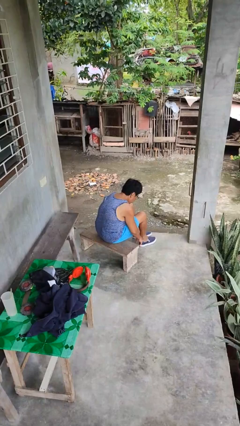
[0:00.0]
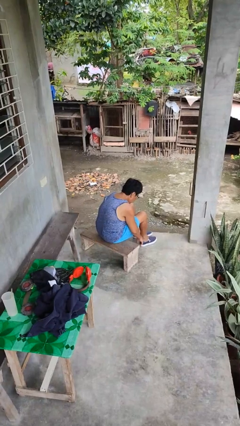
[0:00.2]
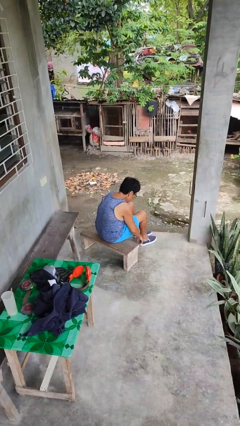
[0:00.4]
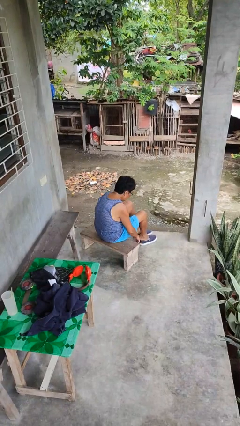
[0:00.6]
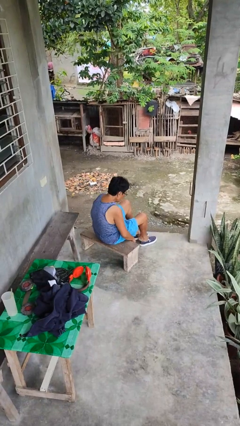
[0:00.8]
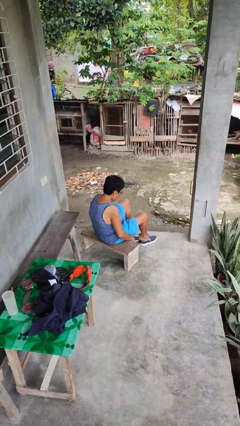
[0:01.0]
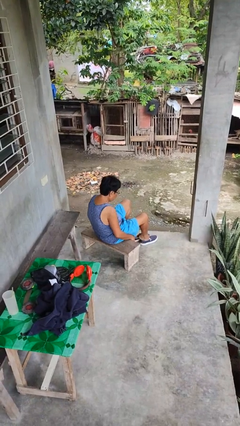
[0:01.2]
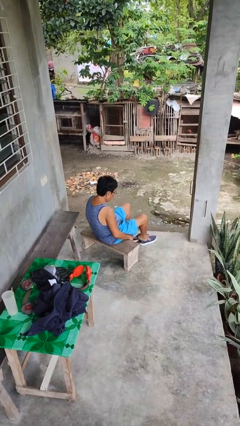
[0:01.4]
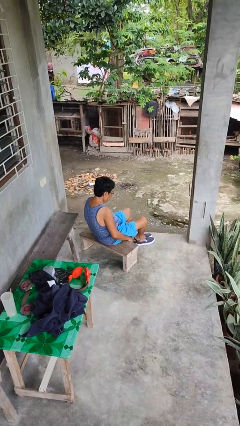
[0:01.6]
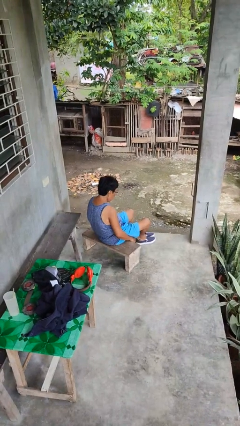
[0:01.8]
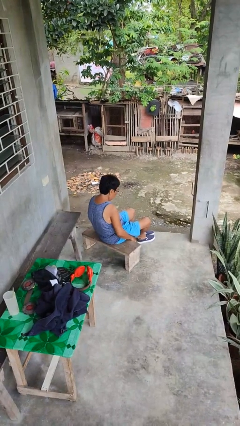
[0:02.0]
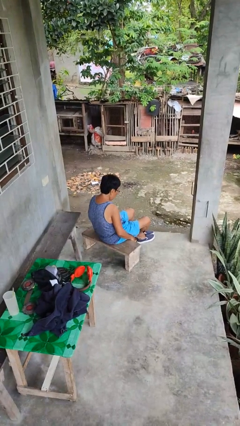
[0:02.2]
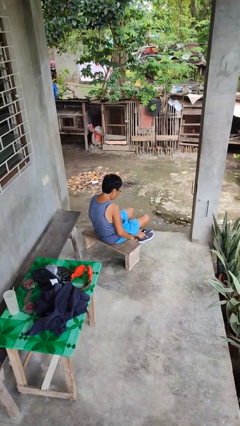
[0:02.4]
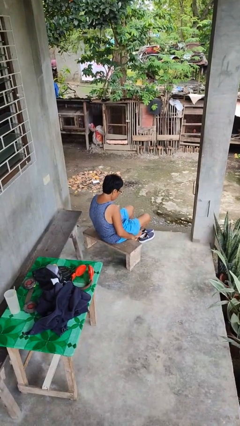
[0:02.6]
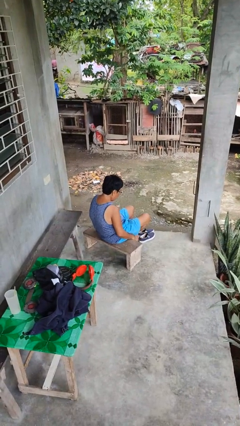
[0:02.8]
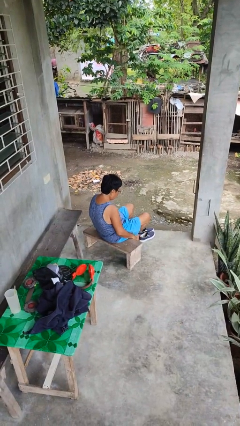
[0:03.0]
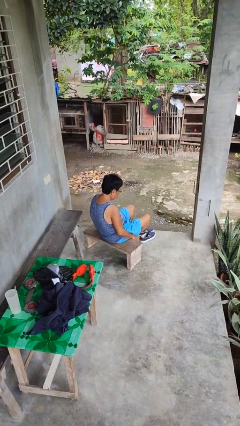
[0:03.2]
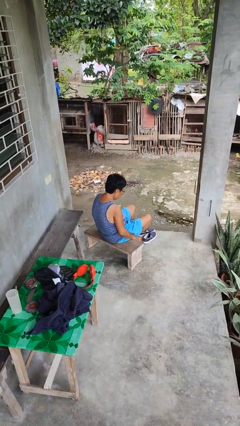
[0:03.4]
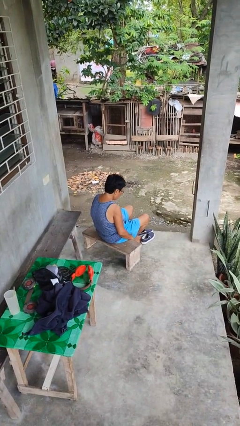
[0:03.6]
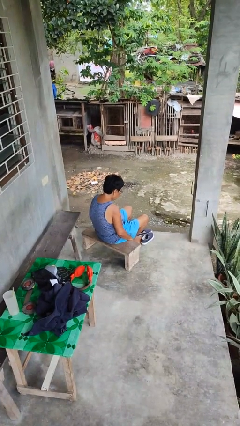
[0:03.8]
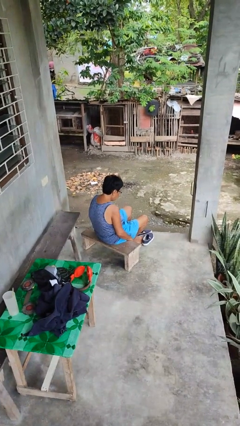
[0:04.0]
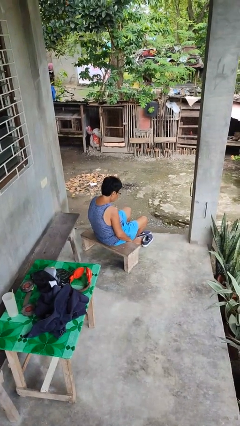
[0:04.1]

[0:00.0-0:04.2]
person takes off shoes

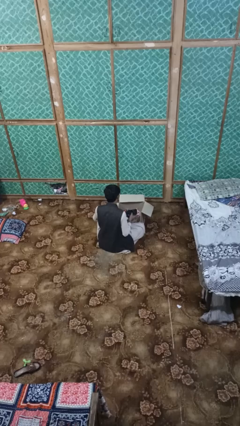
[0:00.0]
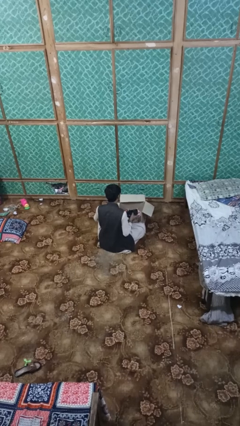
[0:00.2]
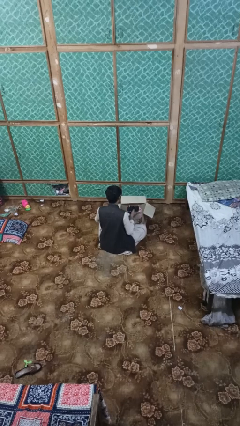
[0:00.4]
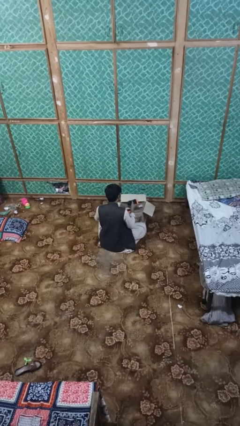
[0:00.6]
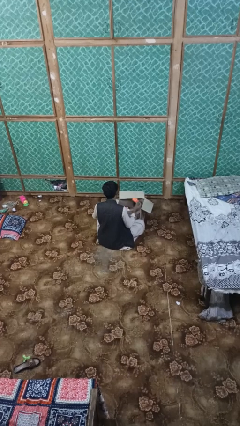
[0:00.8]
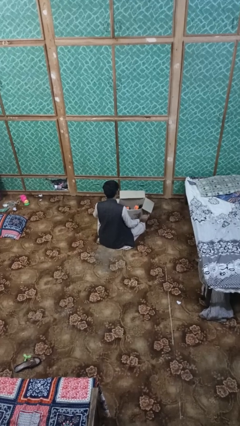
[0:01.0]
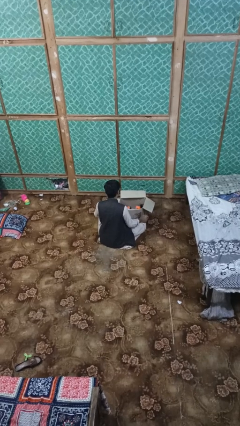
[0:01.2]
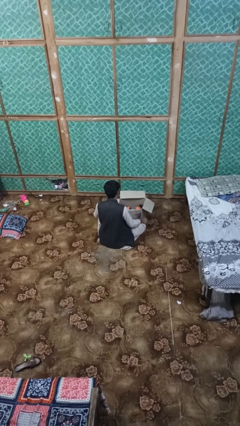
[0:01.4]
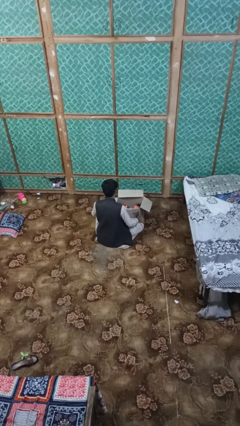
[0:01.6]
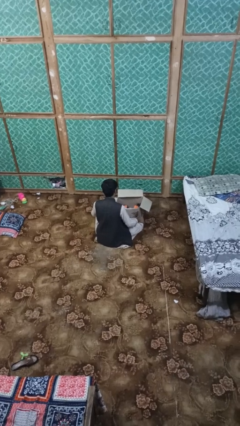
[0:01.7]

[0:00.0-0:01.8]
person puts object into box

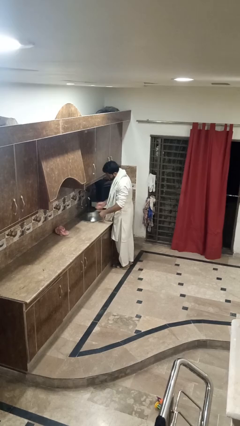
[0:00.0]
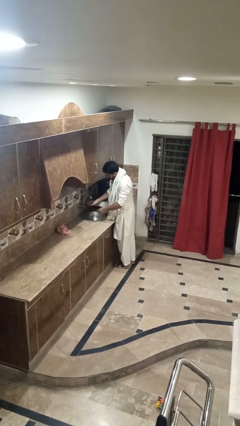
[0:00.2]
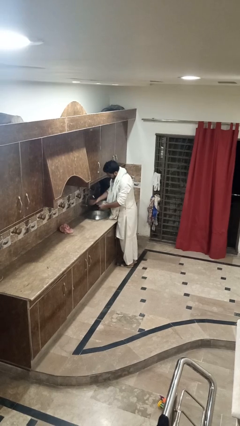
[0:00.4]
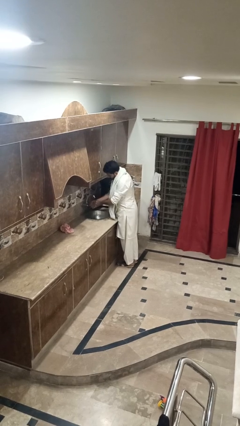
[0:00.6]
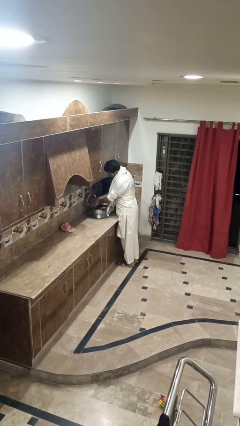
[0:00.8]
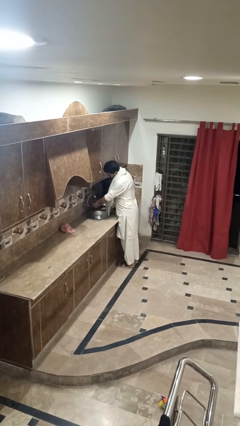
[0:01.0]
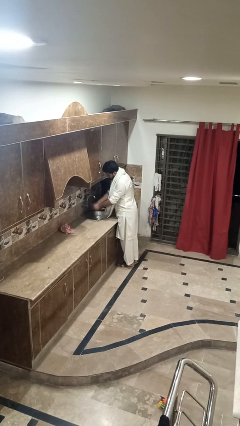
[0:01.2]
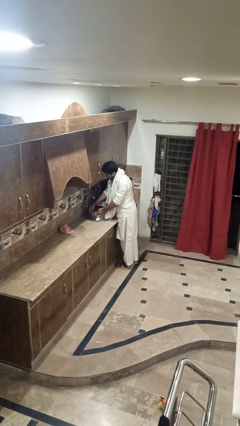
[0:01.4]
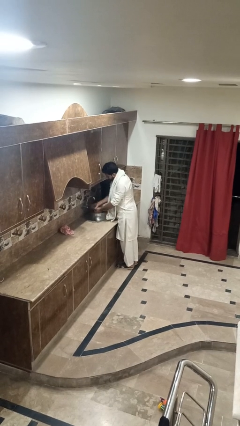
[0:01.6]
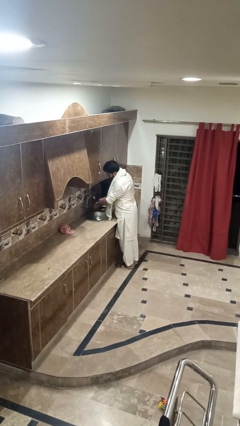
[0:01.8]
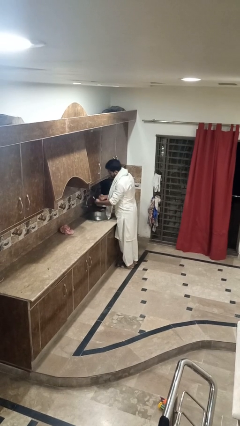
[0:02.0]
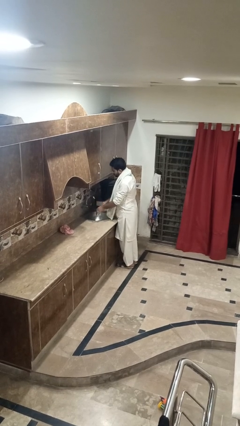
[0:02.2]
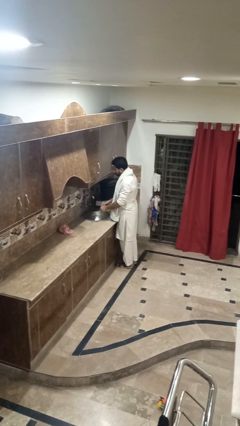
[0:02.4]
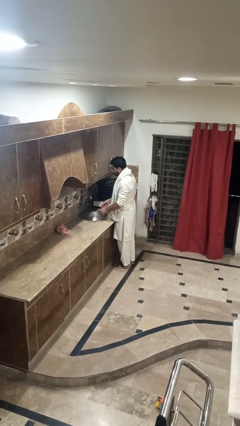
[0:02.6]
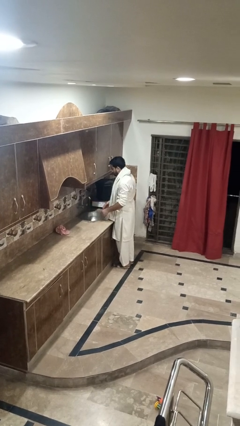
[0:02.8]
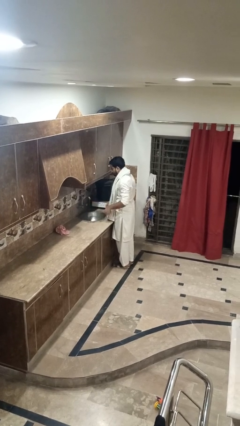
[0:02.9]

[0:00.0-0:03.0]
person washes hands

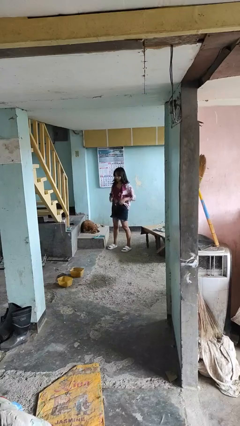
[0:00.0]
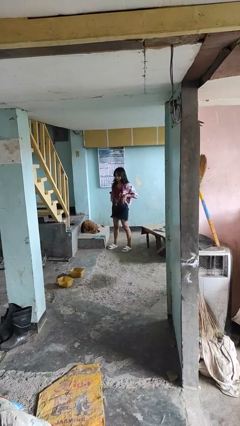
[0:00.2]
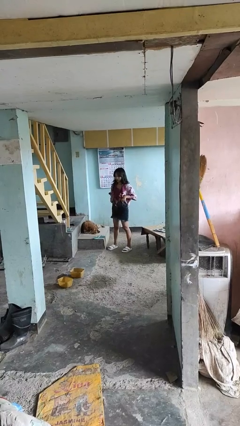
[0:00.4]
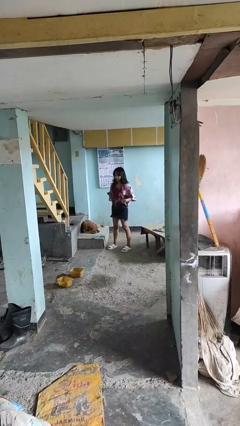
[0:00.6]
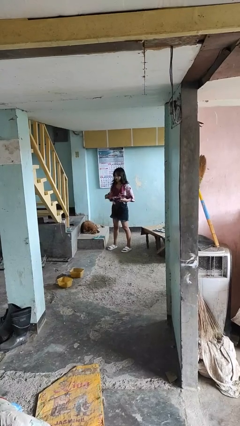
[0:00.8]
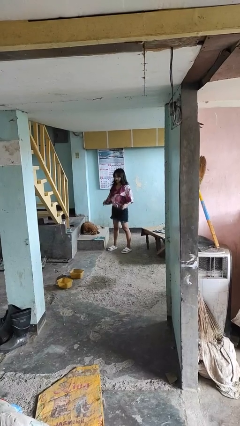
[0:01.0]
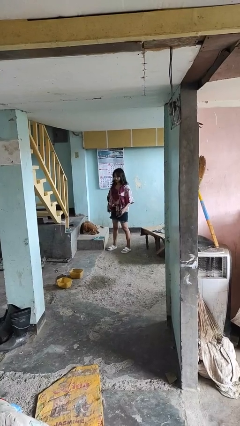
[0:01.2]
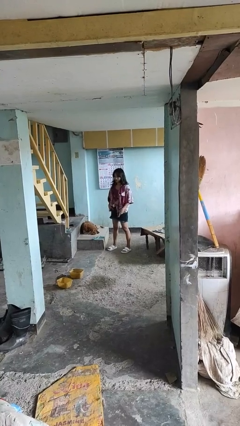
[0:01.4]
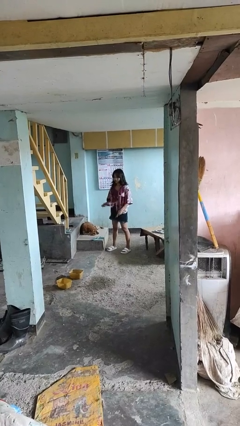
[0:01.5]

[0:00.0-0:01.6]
person untucks shirt

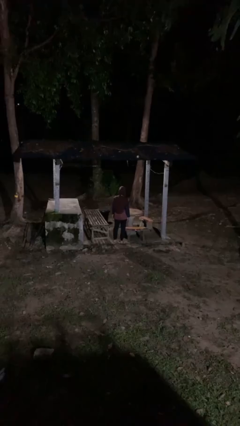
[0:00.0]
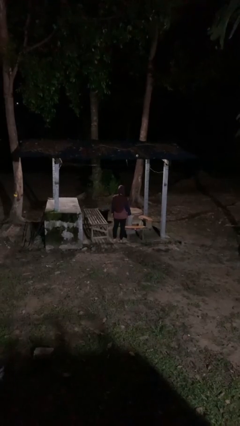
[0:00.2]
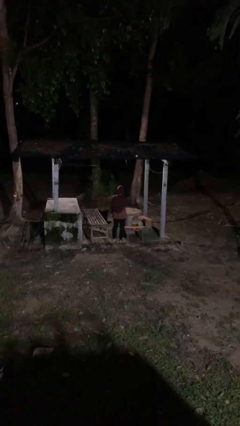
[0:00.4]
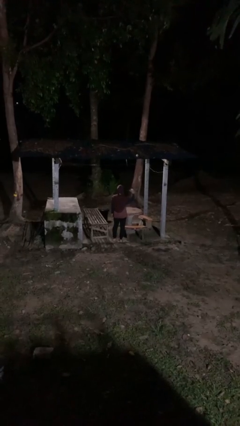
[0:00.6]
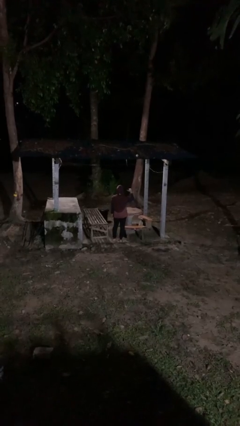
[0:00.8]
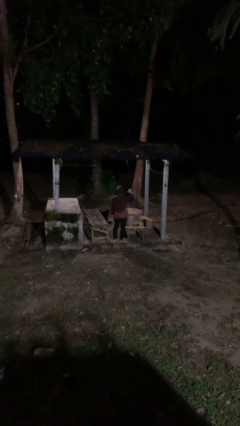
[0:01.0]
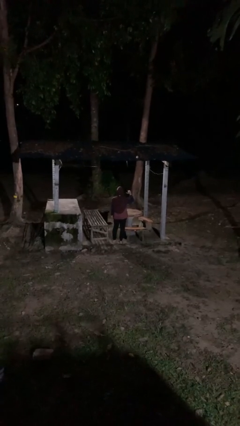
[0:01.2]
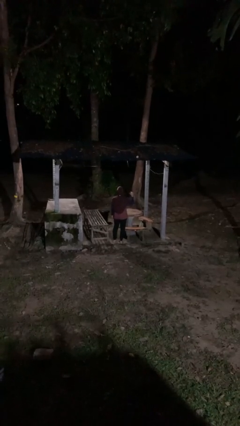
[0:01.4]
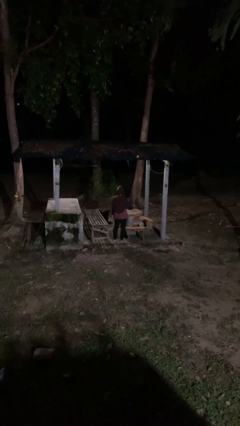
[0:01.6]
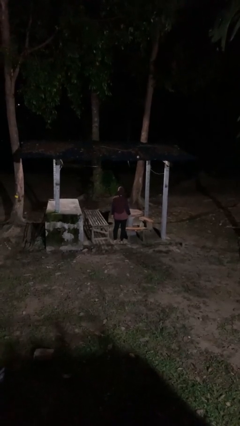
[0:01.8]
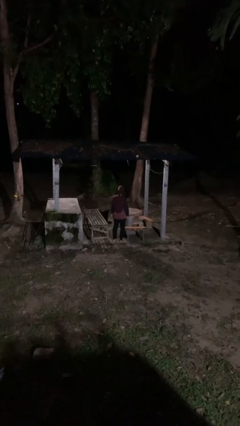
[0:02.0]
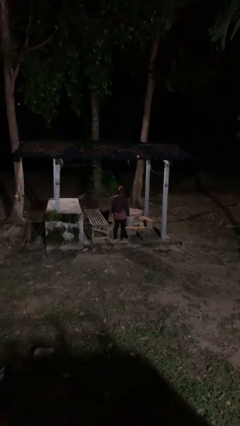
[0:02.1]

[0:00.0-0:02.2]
person gestures behind me

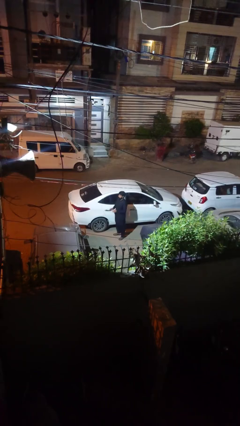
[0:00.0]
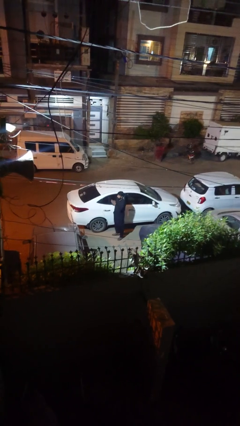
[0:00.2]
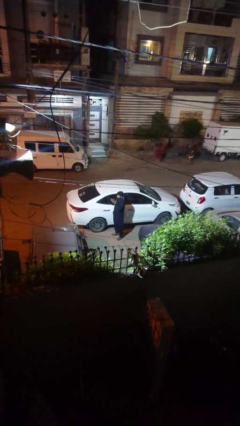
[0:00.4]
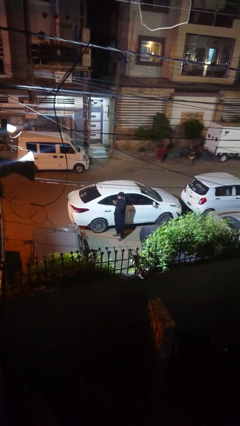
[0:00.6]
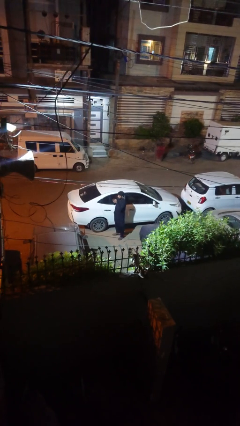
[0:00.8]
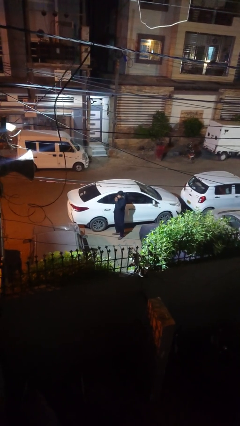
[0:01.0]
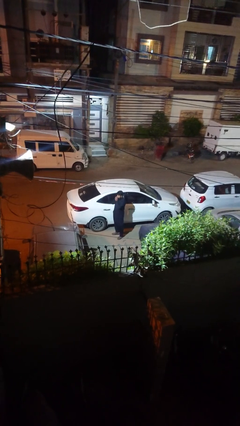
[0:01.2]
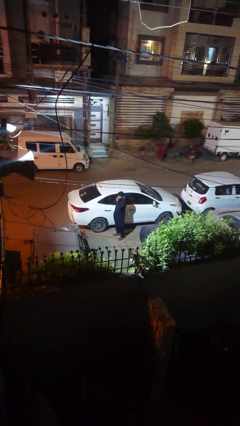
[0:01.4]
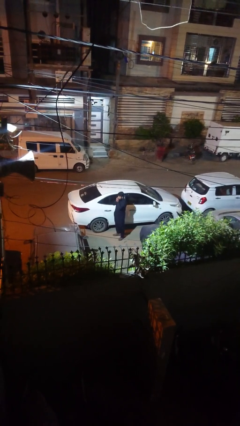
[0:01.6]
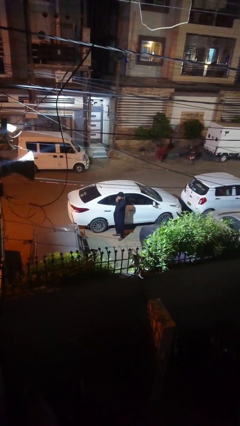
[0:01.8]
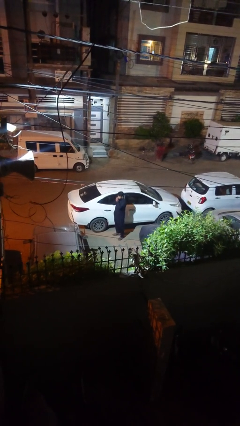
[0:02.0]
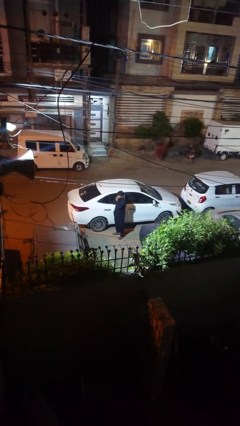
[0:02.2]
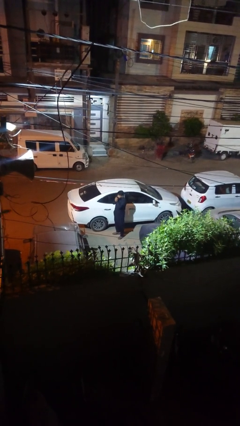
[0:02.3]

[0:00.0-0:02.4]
person blows into hands

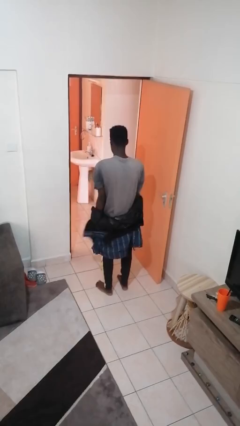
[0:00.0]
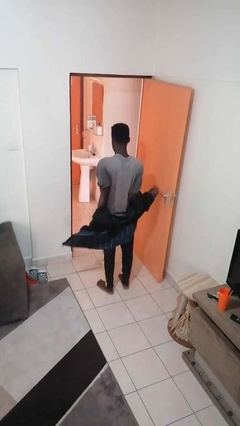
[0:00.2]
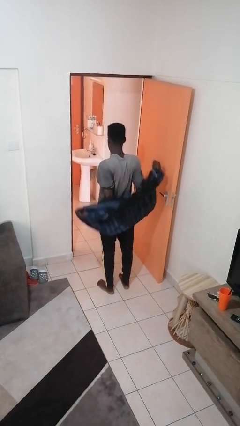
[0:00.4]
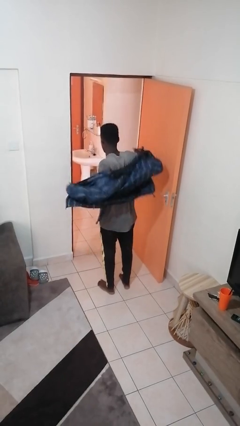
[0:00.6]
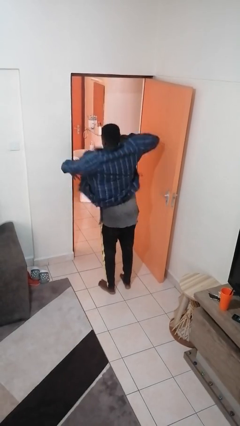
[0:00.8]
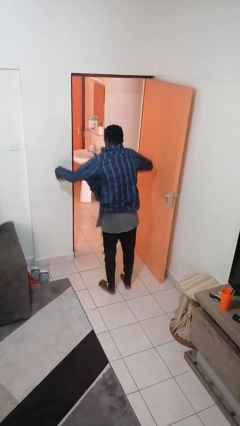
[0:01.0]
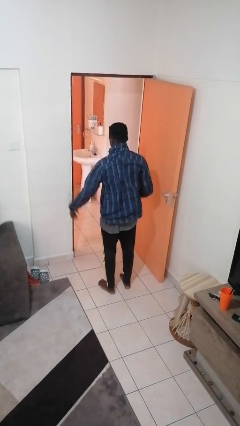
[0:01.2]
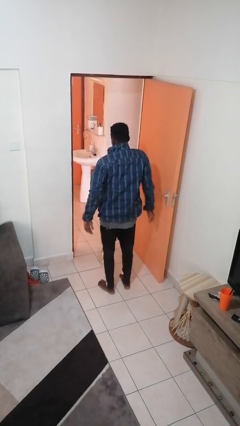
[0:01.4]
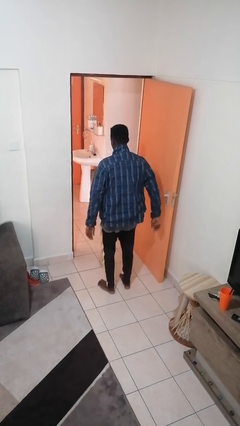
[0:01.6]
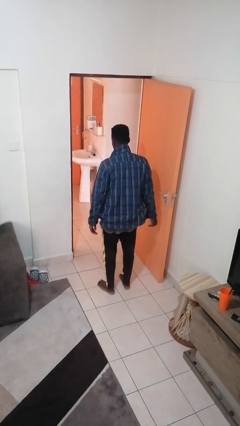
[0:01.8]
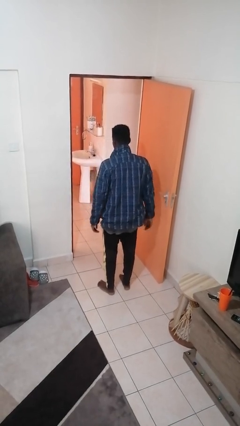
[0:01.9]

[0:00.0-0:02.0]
person puts on jacket
